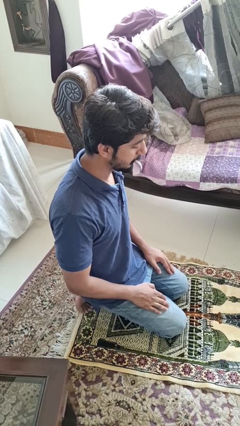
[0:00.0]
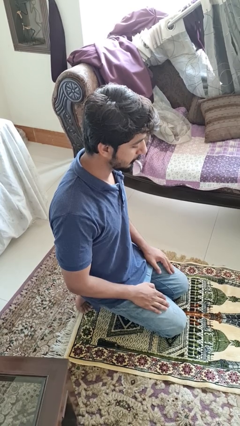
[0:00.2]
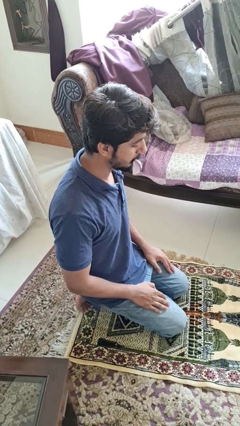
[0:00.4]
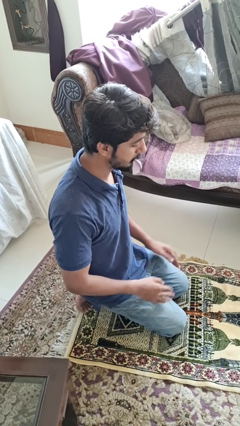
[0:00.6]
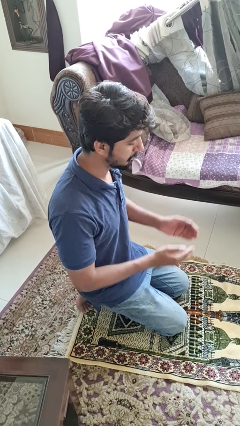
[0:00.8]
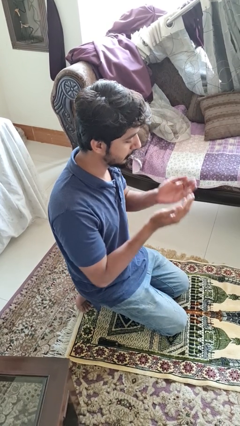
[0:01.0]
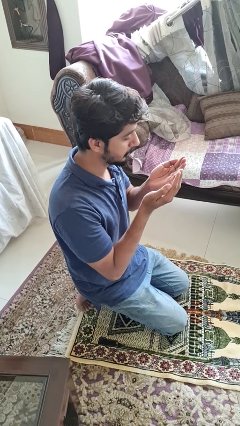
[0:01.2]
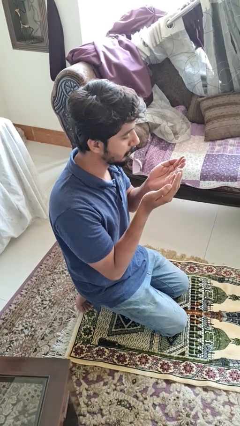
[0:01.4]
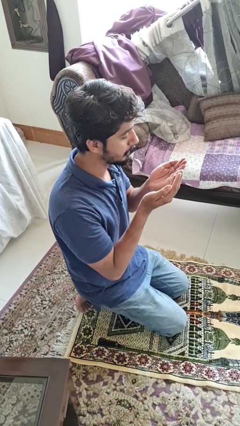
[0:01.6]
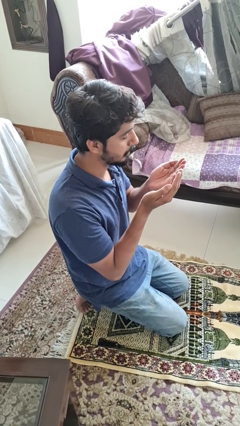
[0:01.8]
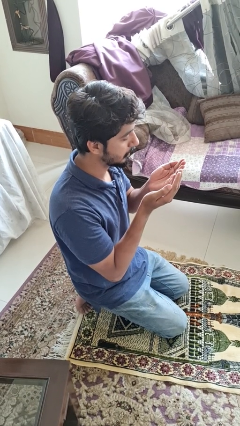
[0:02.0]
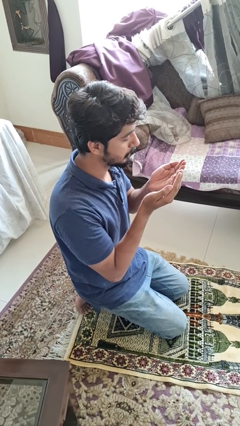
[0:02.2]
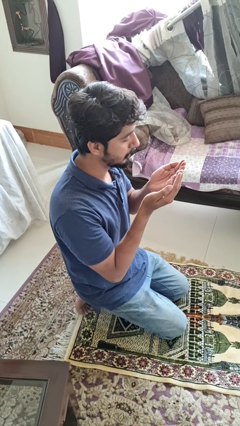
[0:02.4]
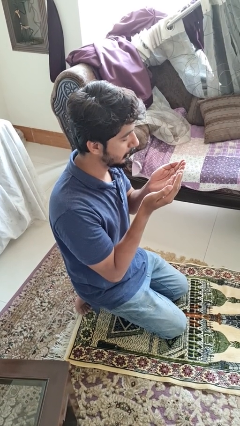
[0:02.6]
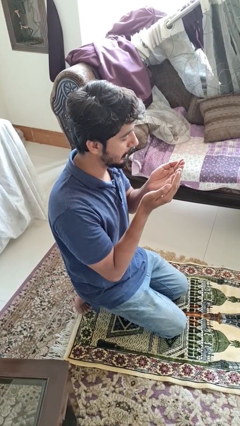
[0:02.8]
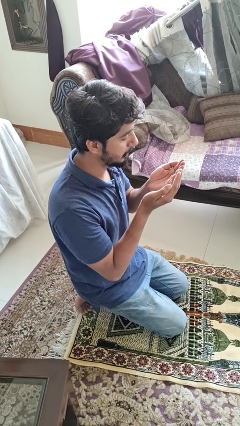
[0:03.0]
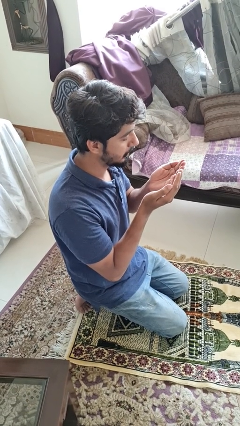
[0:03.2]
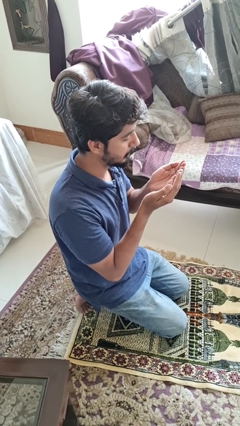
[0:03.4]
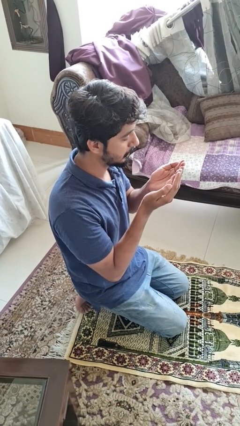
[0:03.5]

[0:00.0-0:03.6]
person prays

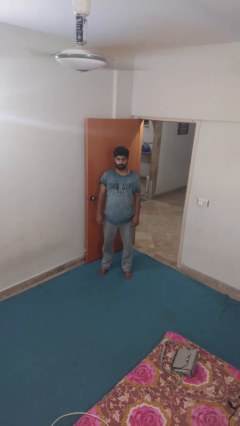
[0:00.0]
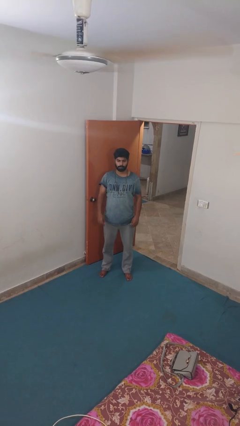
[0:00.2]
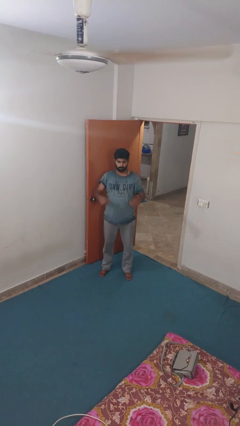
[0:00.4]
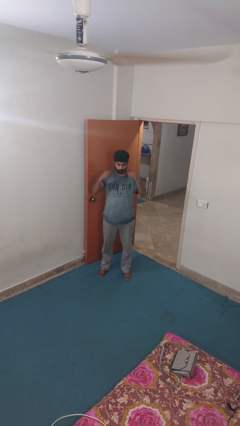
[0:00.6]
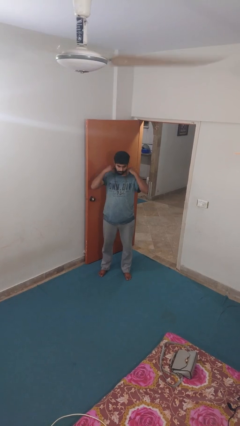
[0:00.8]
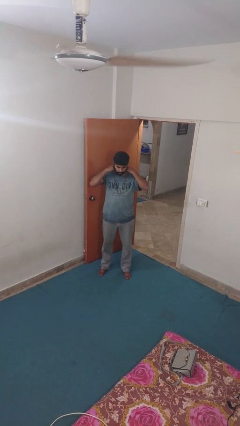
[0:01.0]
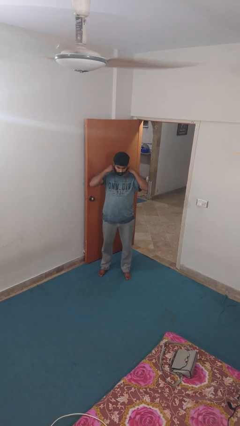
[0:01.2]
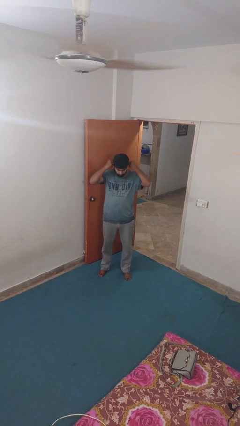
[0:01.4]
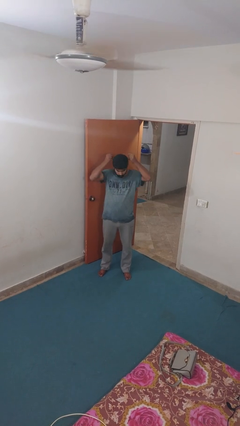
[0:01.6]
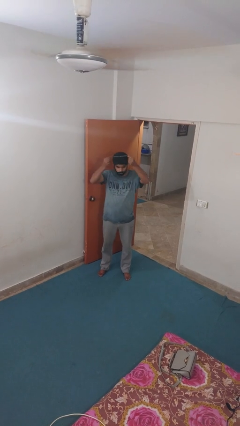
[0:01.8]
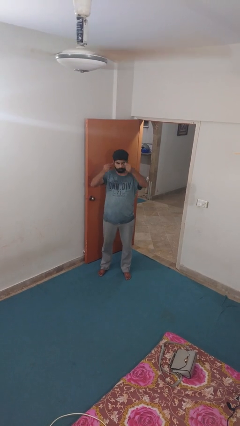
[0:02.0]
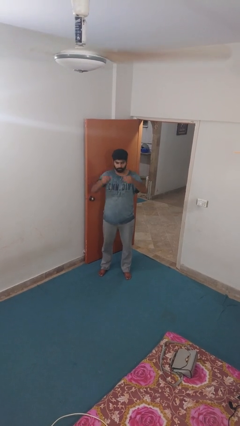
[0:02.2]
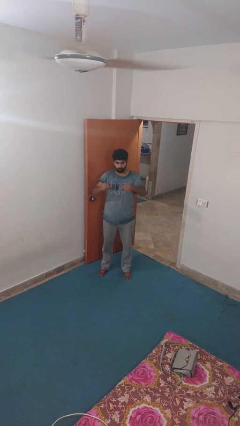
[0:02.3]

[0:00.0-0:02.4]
person takes off necklace

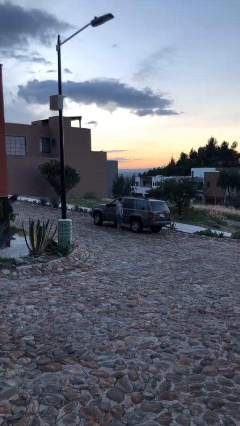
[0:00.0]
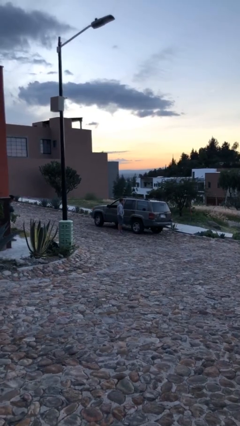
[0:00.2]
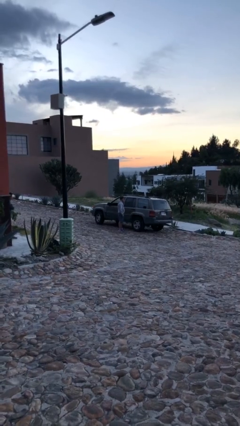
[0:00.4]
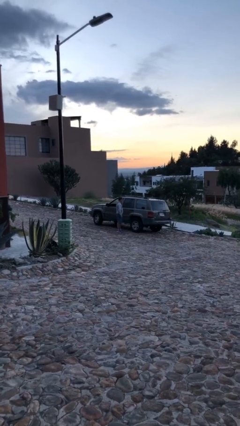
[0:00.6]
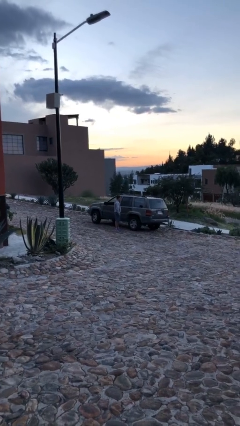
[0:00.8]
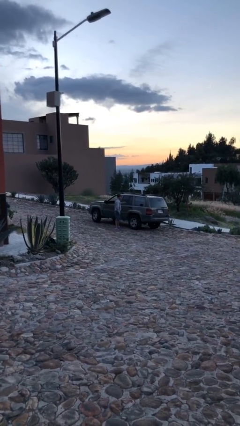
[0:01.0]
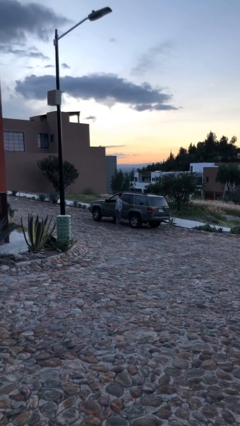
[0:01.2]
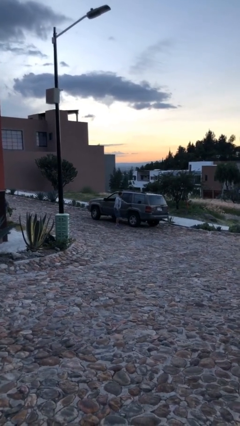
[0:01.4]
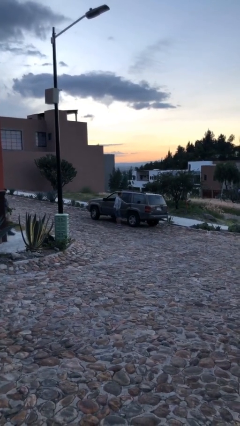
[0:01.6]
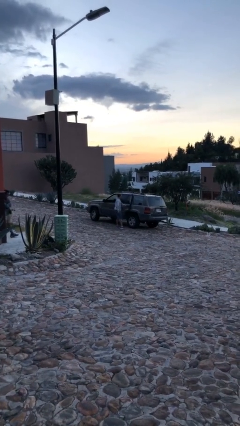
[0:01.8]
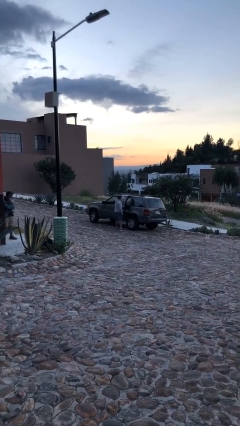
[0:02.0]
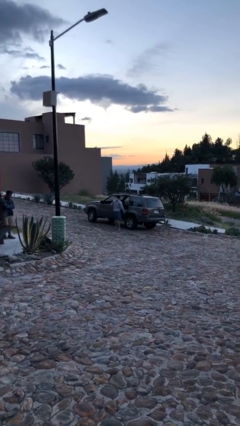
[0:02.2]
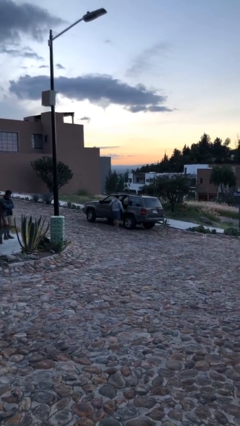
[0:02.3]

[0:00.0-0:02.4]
person opens car door

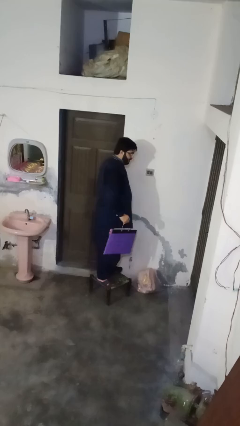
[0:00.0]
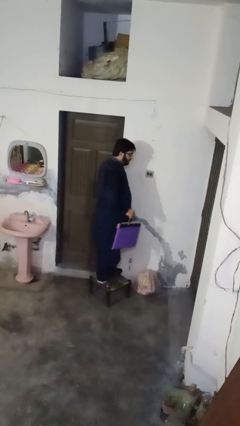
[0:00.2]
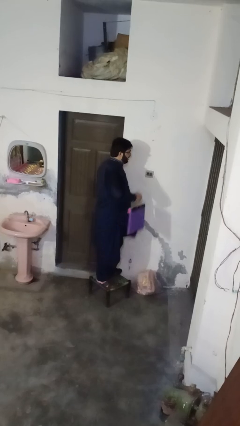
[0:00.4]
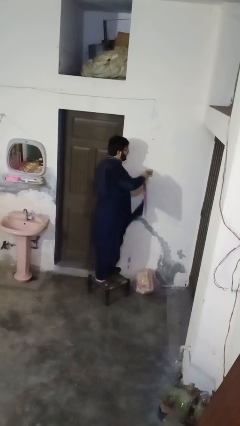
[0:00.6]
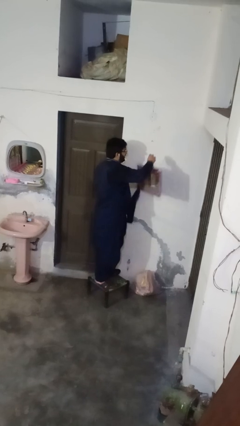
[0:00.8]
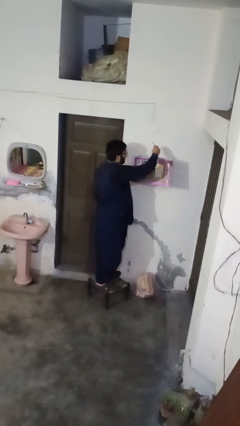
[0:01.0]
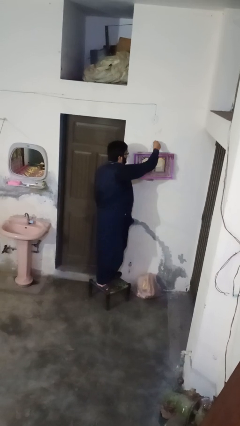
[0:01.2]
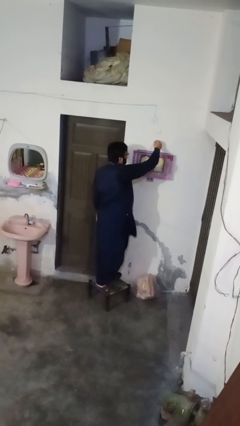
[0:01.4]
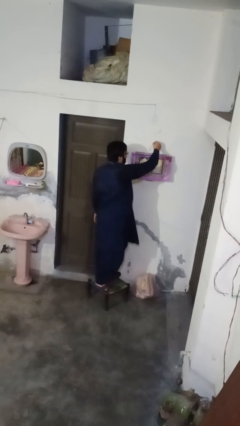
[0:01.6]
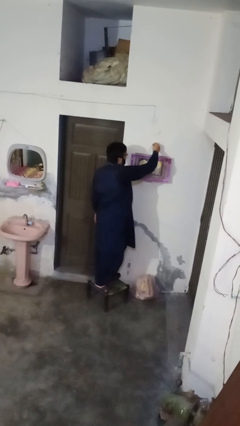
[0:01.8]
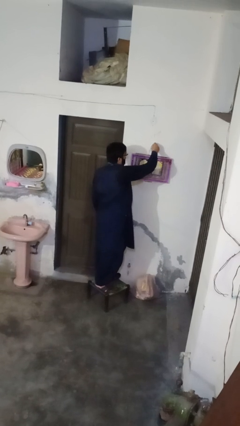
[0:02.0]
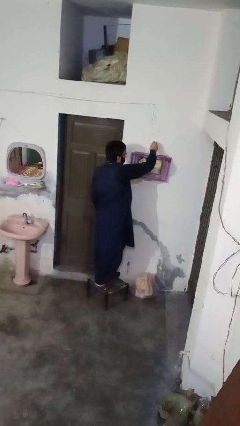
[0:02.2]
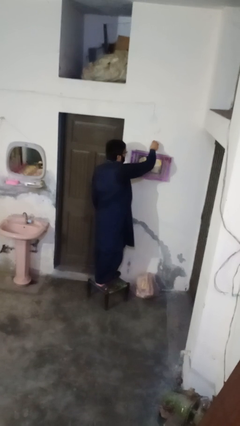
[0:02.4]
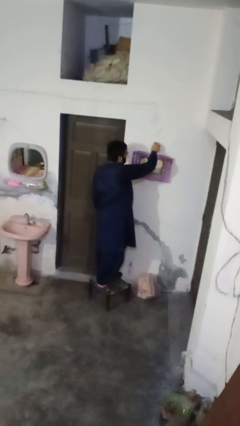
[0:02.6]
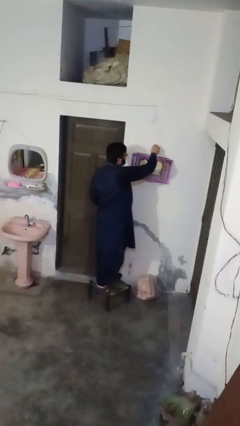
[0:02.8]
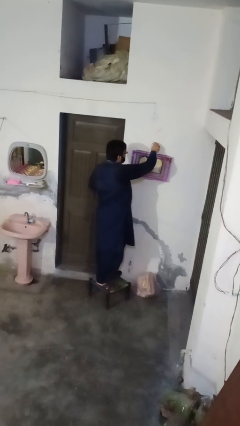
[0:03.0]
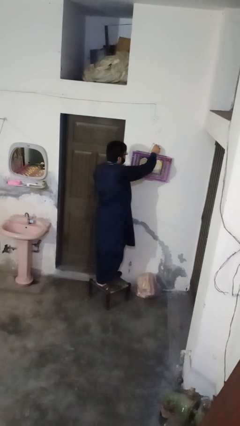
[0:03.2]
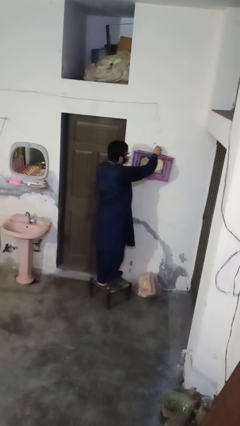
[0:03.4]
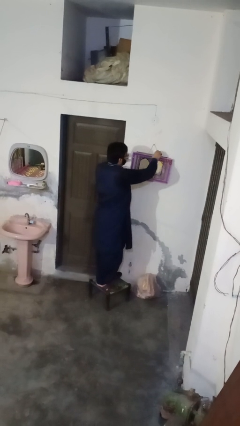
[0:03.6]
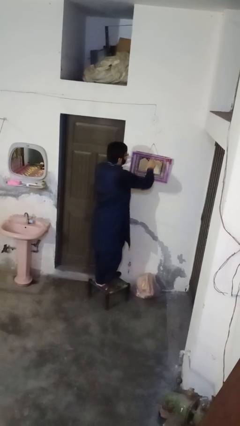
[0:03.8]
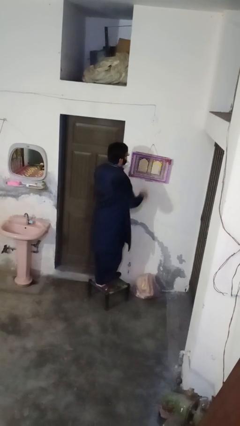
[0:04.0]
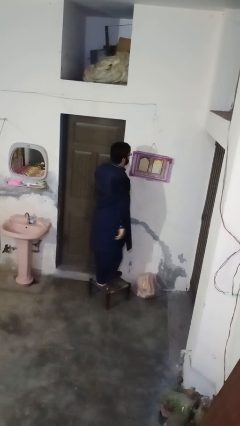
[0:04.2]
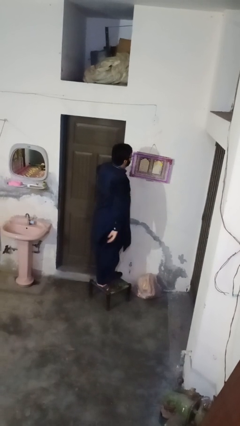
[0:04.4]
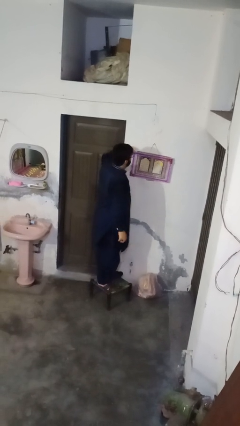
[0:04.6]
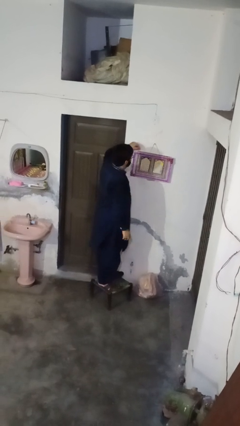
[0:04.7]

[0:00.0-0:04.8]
person puts up picture frame

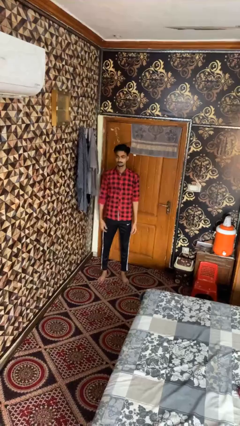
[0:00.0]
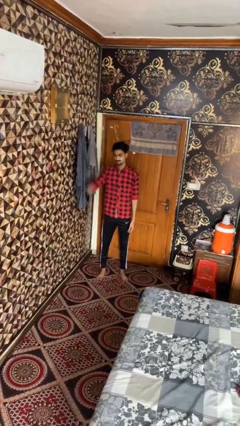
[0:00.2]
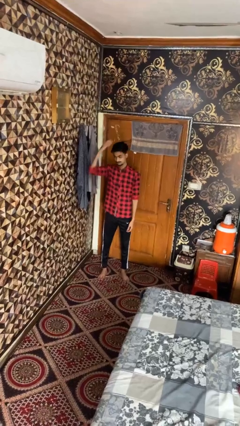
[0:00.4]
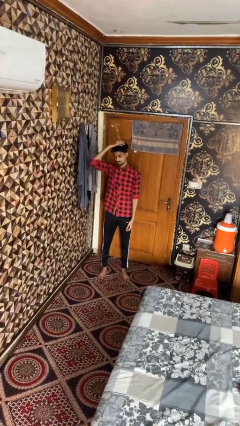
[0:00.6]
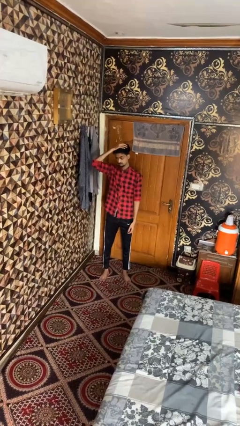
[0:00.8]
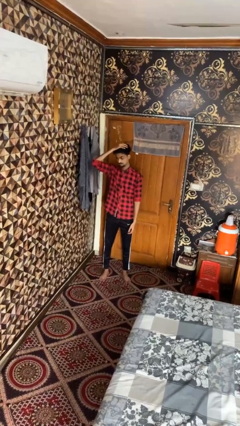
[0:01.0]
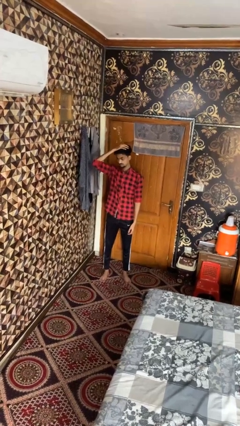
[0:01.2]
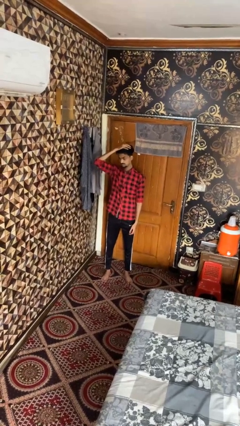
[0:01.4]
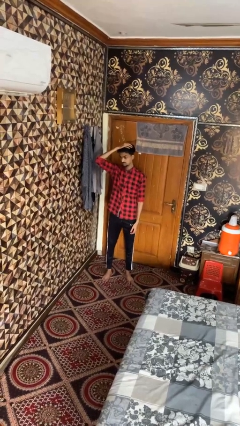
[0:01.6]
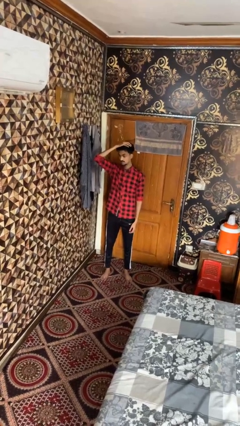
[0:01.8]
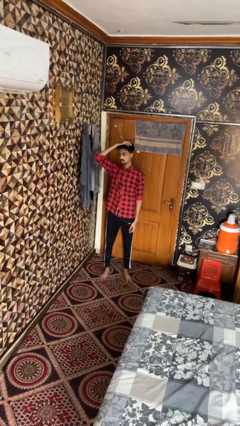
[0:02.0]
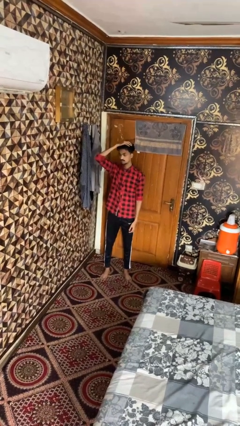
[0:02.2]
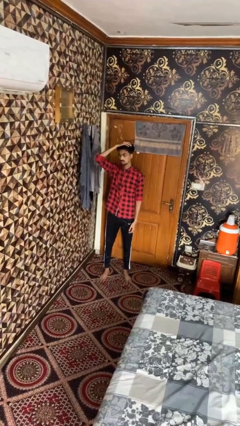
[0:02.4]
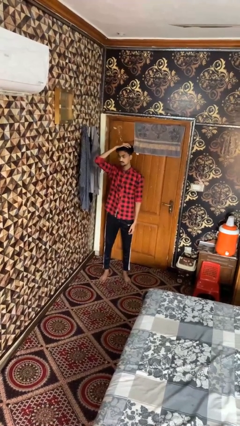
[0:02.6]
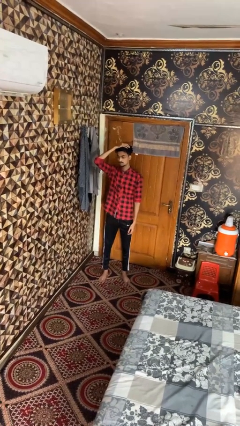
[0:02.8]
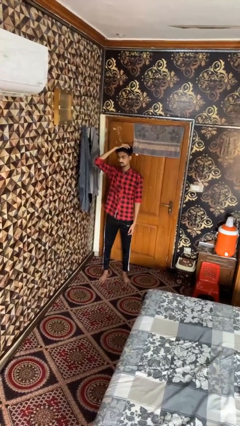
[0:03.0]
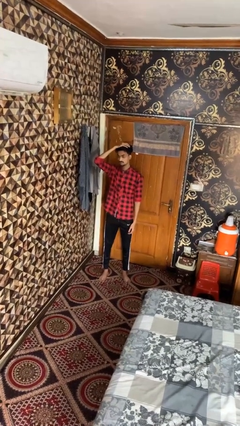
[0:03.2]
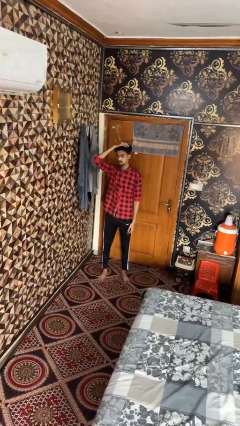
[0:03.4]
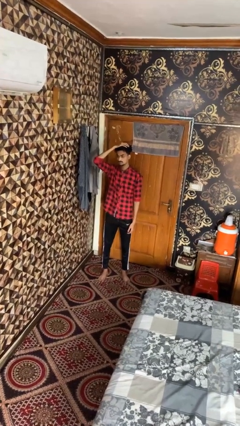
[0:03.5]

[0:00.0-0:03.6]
person pats head

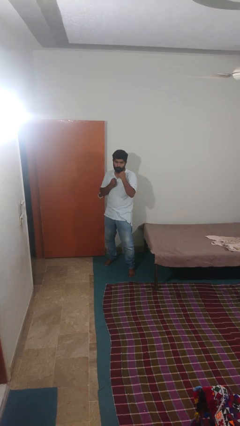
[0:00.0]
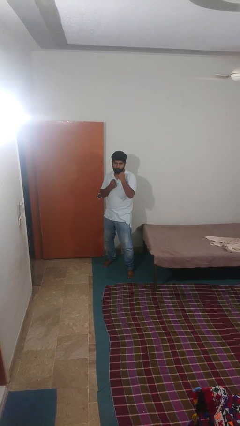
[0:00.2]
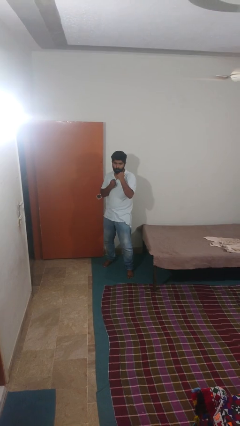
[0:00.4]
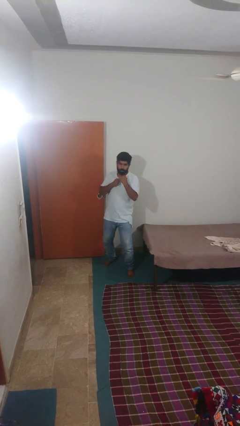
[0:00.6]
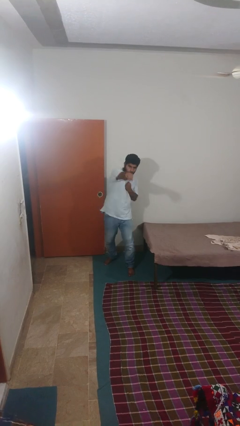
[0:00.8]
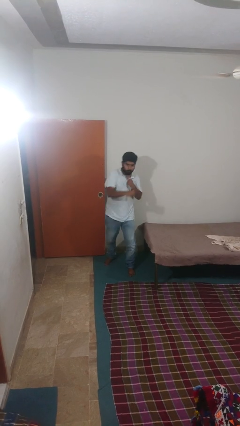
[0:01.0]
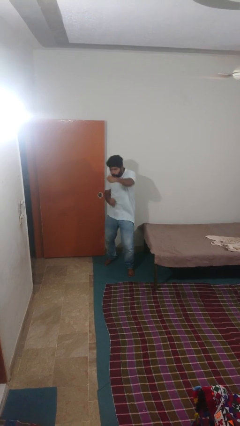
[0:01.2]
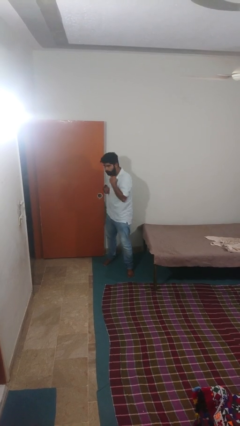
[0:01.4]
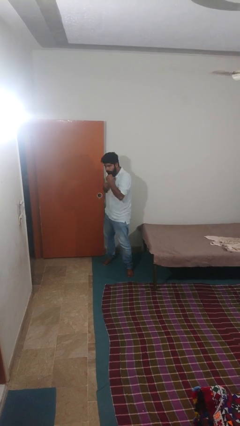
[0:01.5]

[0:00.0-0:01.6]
person punches
